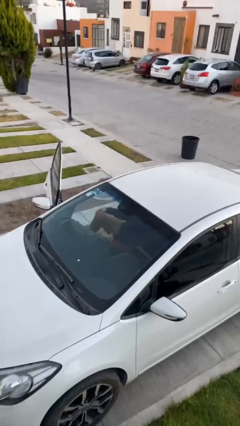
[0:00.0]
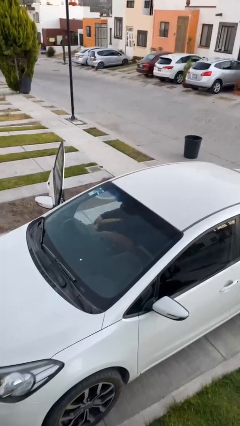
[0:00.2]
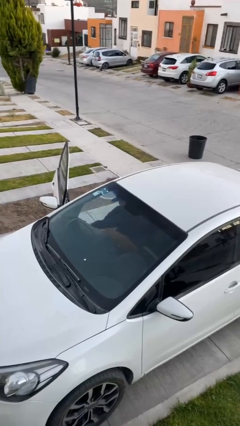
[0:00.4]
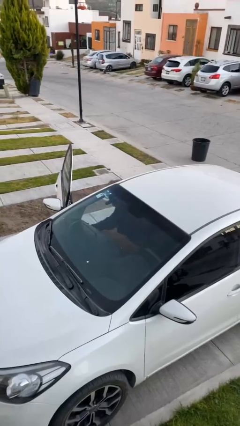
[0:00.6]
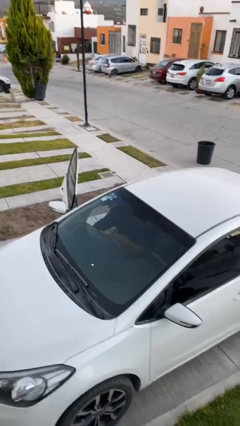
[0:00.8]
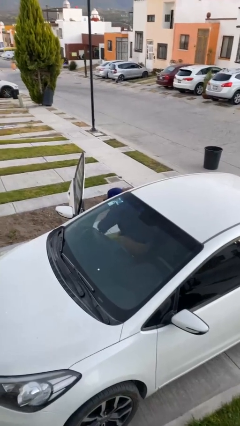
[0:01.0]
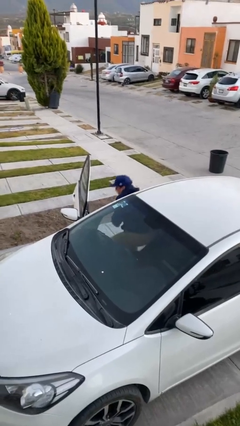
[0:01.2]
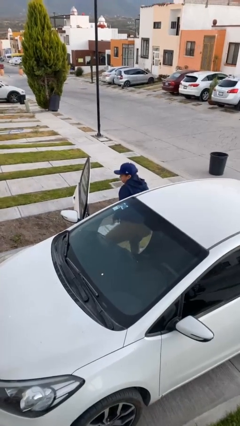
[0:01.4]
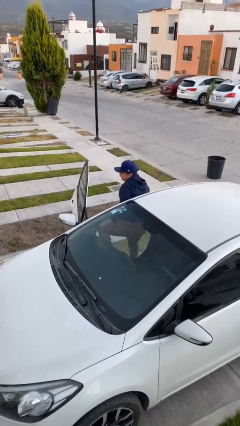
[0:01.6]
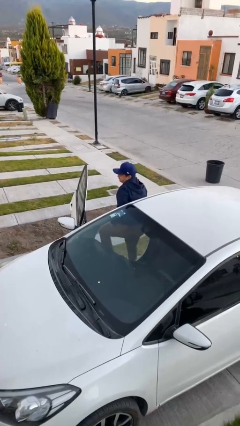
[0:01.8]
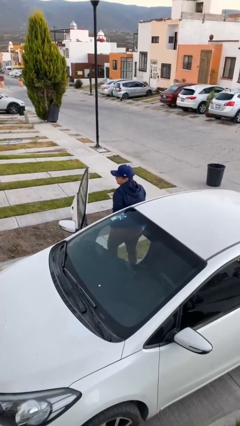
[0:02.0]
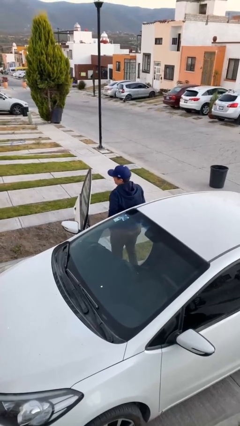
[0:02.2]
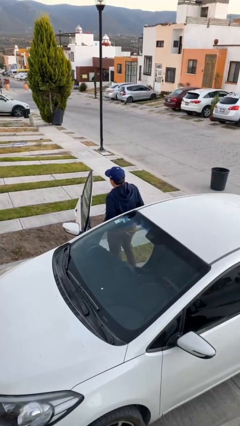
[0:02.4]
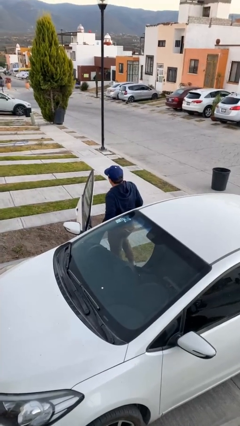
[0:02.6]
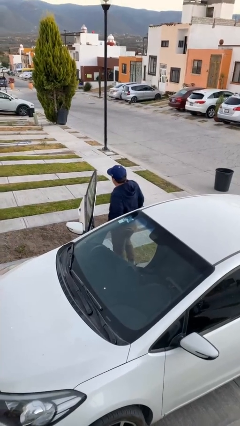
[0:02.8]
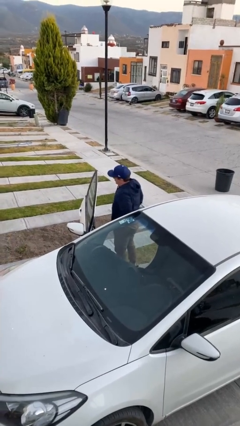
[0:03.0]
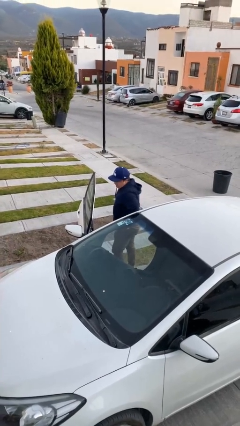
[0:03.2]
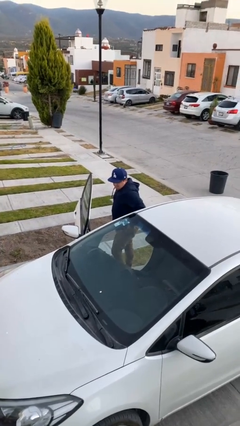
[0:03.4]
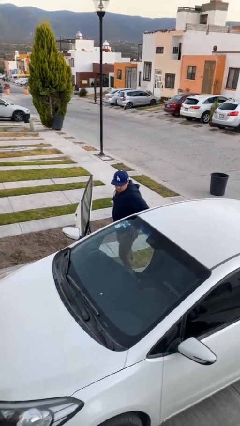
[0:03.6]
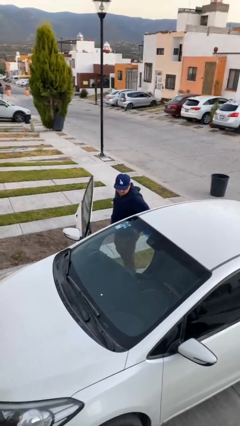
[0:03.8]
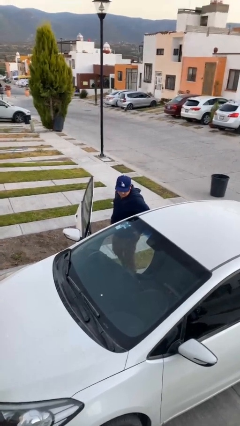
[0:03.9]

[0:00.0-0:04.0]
person exits car

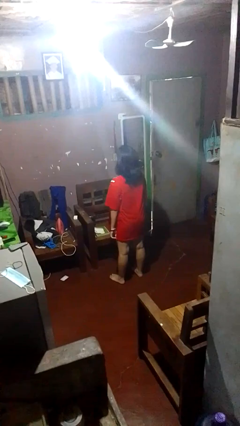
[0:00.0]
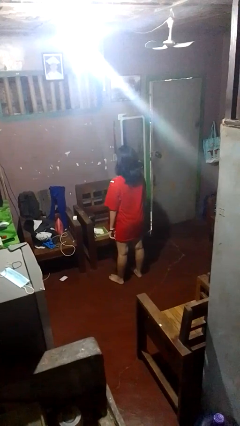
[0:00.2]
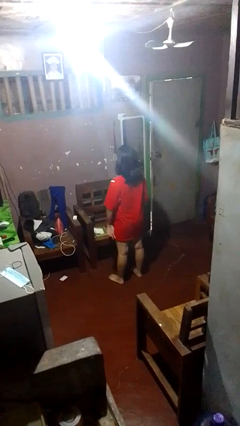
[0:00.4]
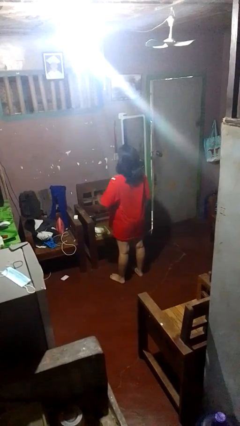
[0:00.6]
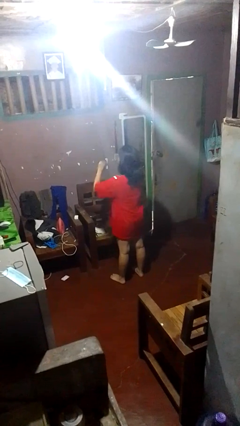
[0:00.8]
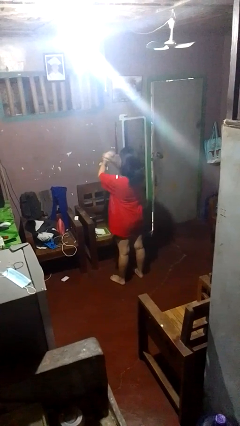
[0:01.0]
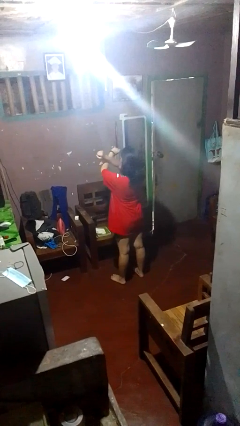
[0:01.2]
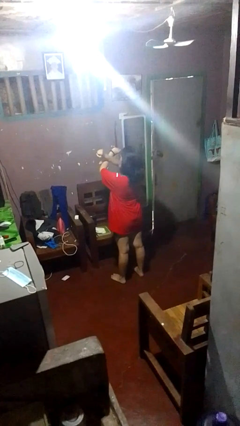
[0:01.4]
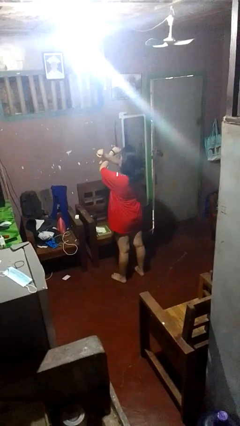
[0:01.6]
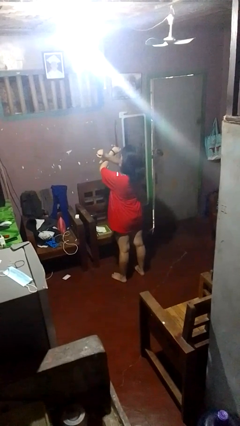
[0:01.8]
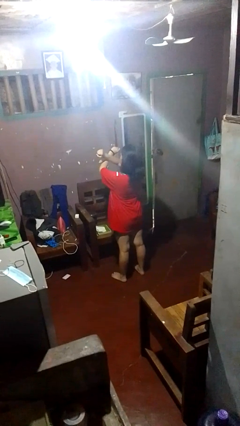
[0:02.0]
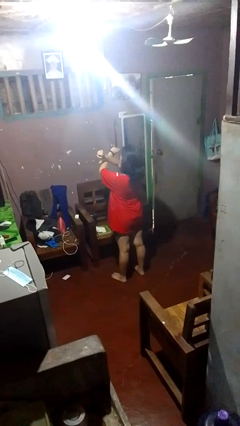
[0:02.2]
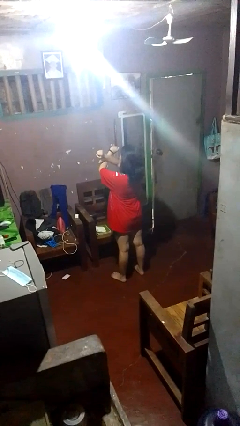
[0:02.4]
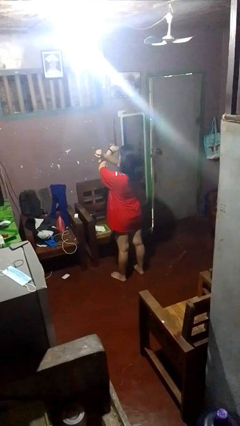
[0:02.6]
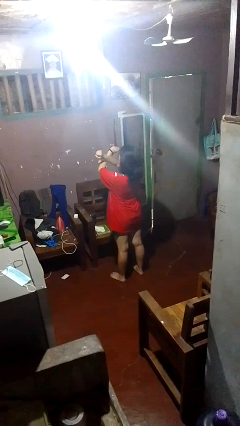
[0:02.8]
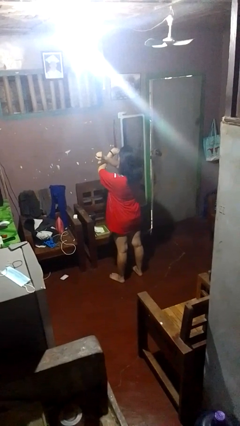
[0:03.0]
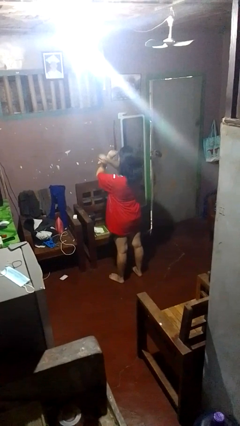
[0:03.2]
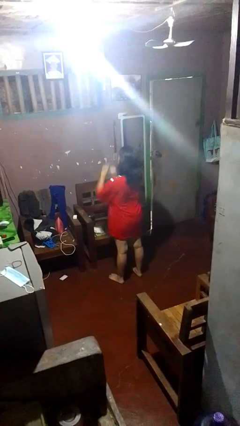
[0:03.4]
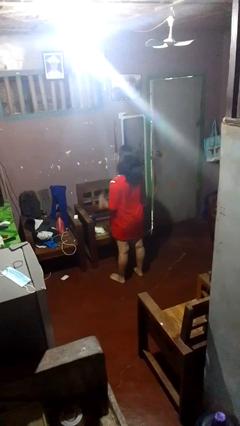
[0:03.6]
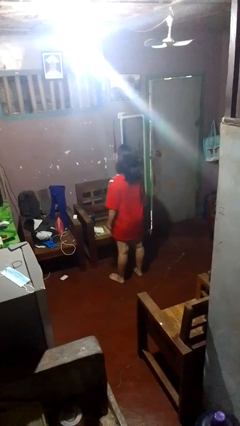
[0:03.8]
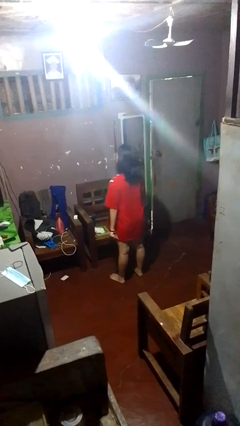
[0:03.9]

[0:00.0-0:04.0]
person gestures arms x

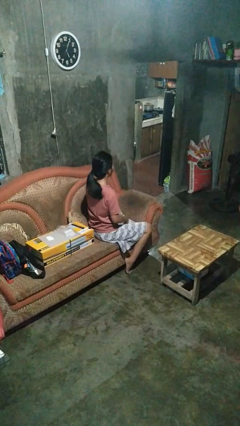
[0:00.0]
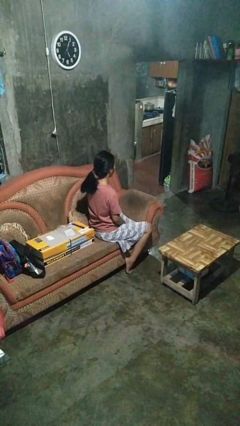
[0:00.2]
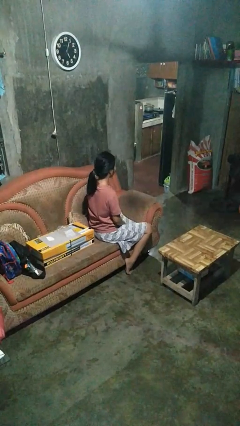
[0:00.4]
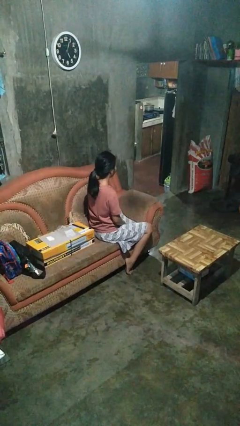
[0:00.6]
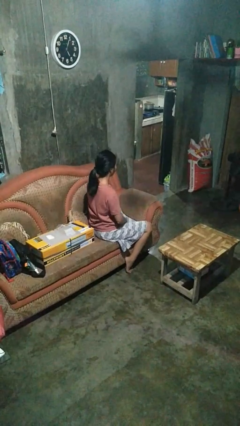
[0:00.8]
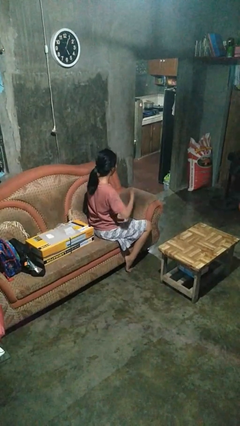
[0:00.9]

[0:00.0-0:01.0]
person takes off hairtie

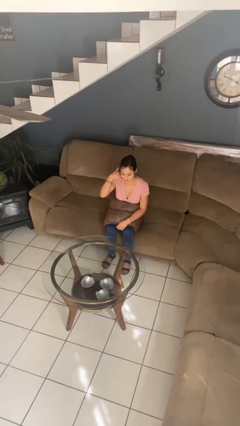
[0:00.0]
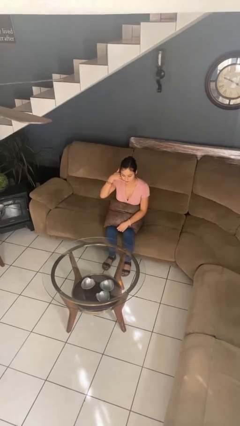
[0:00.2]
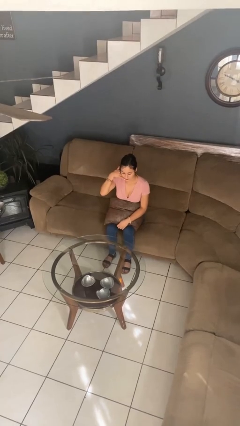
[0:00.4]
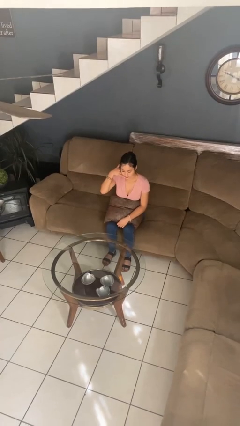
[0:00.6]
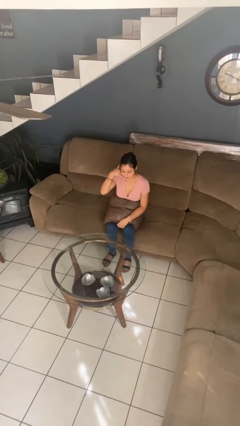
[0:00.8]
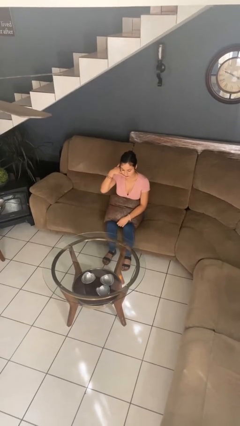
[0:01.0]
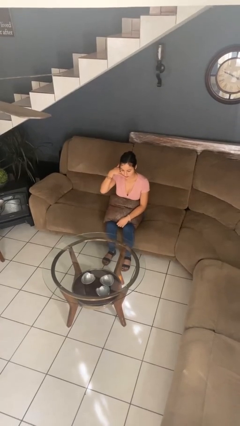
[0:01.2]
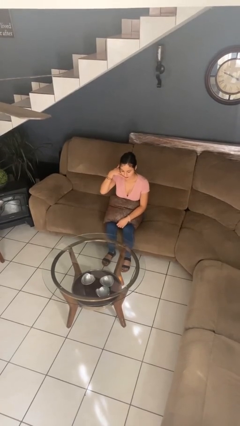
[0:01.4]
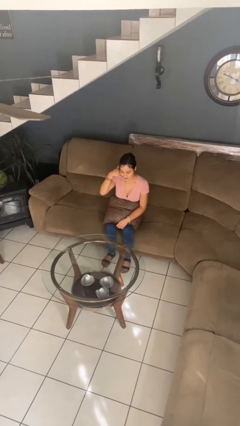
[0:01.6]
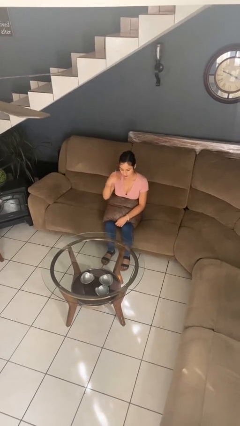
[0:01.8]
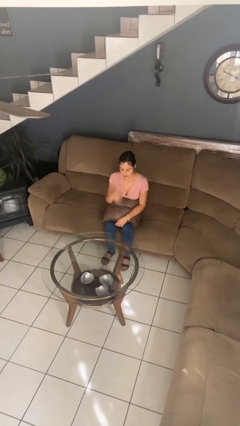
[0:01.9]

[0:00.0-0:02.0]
person gestures call me

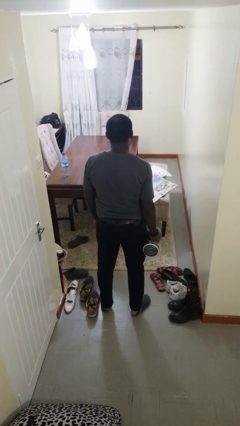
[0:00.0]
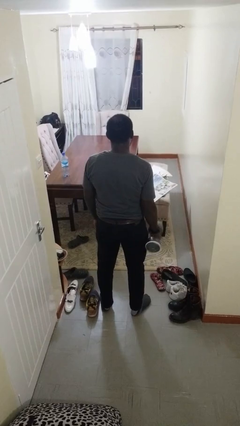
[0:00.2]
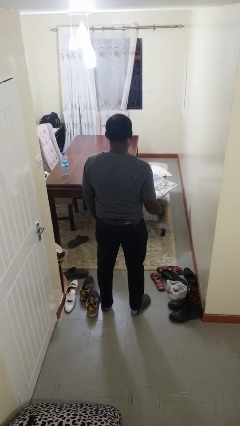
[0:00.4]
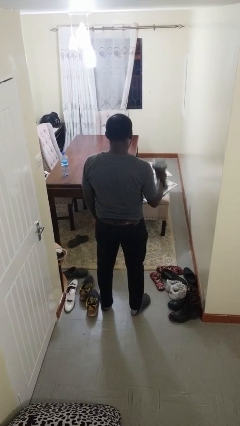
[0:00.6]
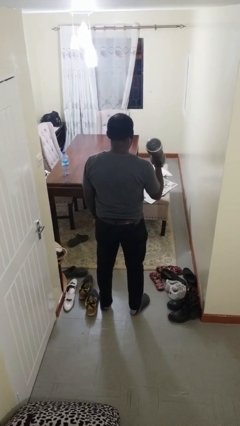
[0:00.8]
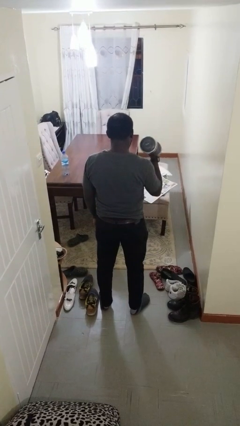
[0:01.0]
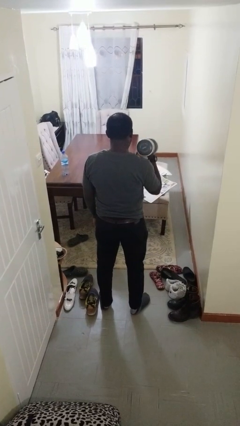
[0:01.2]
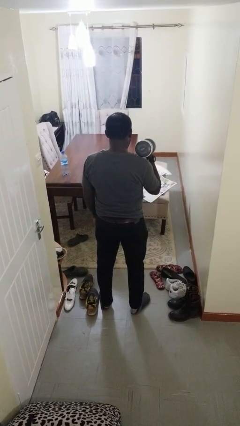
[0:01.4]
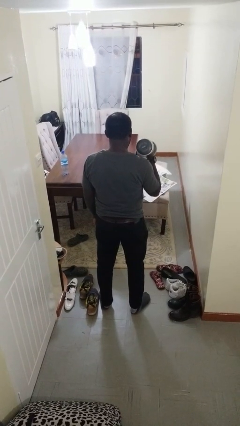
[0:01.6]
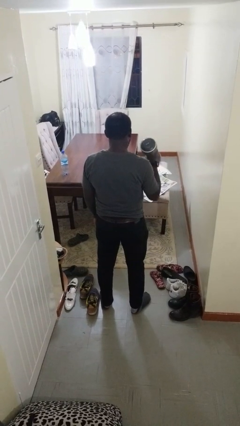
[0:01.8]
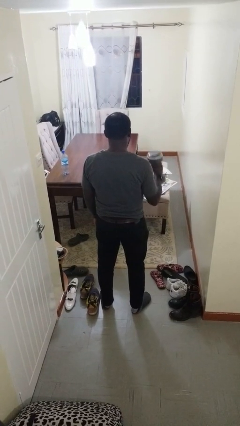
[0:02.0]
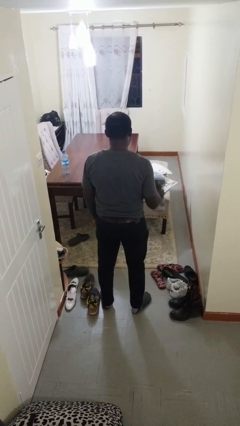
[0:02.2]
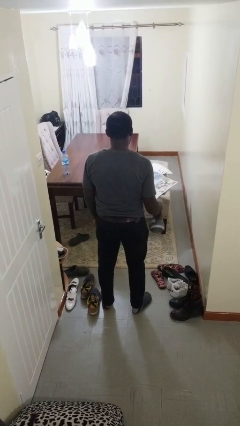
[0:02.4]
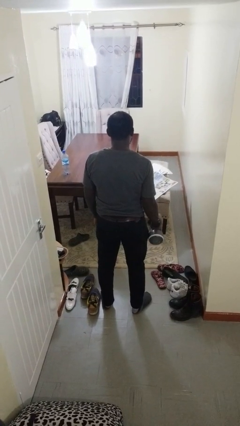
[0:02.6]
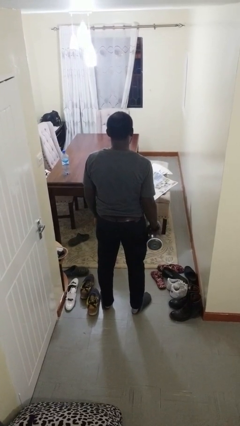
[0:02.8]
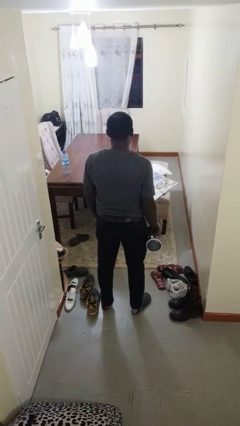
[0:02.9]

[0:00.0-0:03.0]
person lifts dumbbells

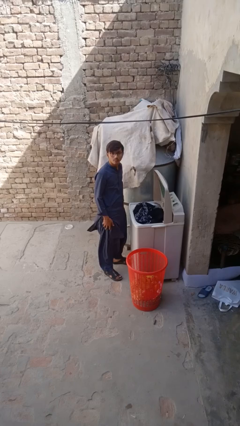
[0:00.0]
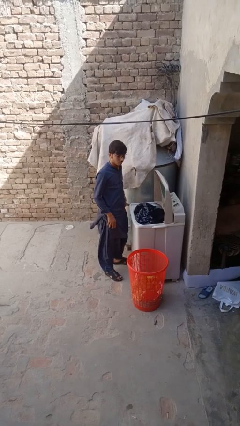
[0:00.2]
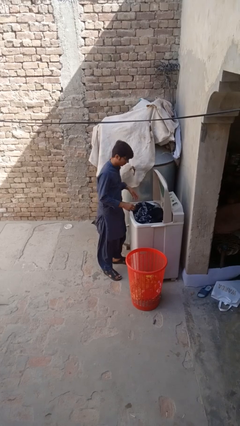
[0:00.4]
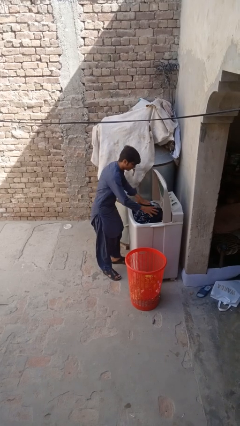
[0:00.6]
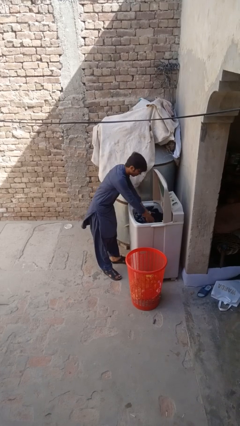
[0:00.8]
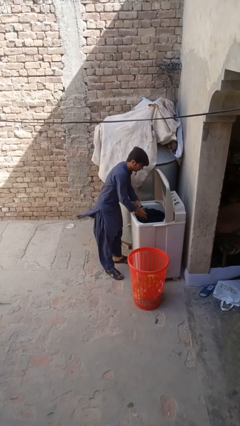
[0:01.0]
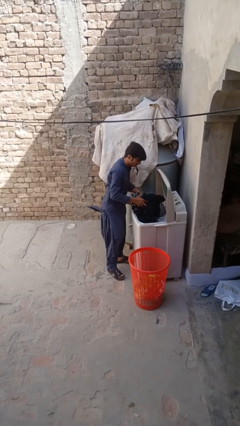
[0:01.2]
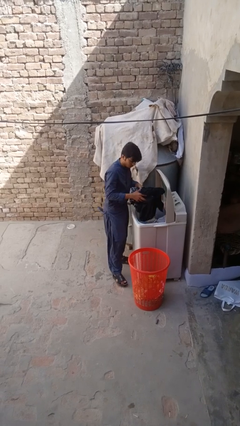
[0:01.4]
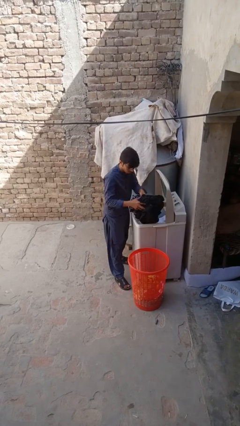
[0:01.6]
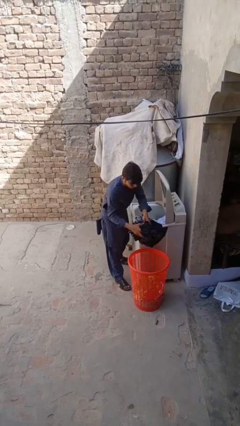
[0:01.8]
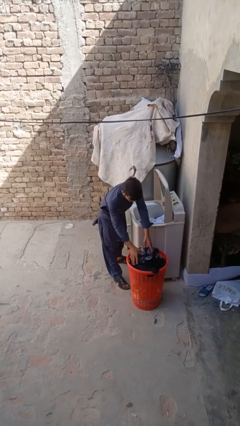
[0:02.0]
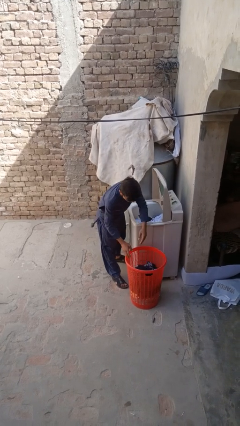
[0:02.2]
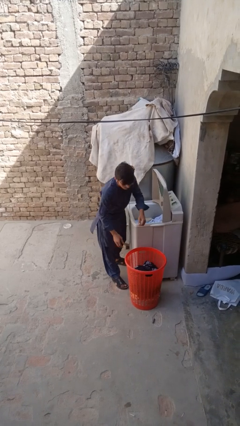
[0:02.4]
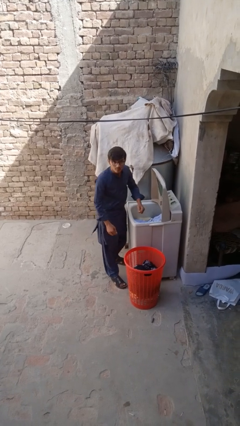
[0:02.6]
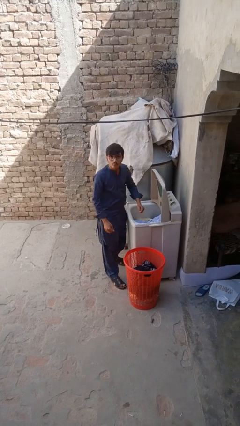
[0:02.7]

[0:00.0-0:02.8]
person unloads clotheswasher

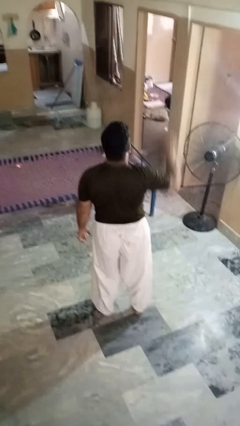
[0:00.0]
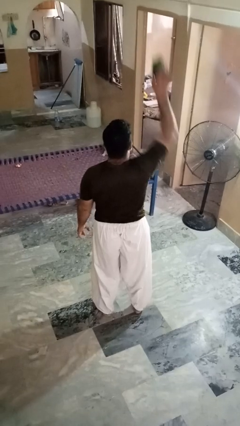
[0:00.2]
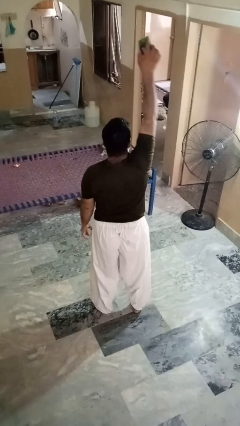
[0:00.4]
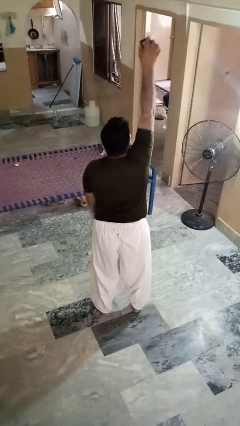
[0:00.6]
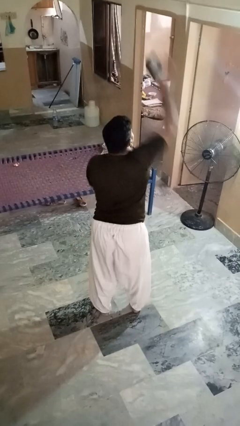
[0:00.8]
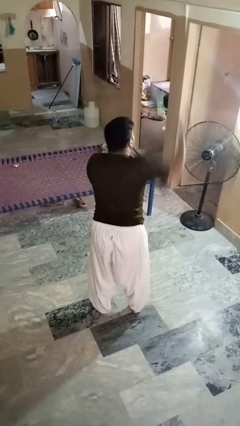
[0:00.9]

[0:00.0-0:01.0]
person drops object
